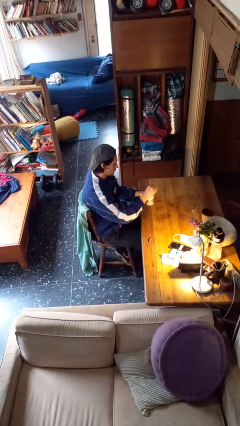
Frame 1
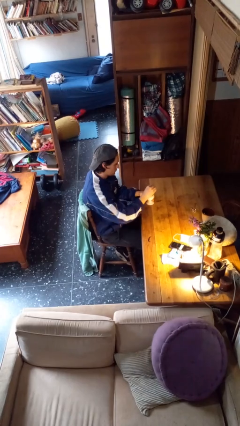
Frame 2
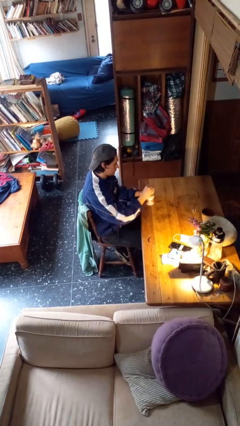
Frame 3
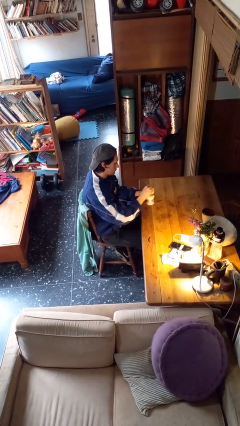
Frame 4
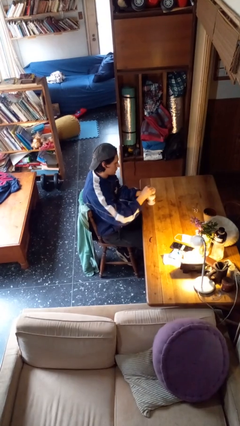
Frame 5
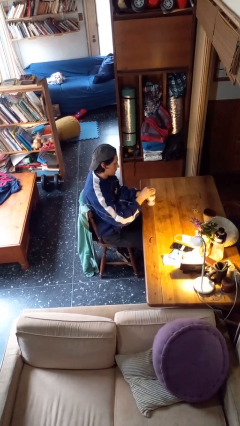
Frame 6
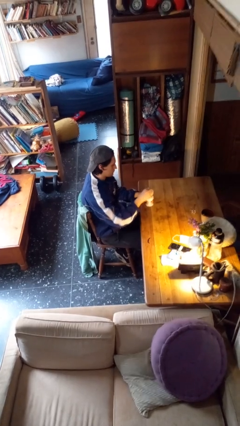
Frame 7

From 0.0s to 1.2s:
person stirs mug

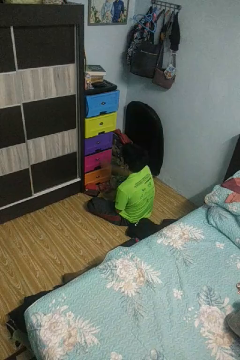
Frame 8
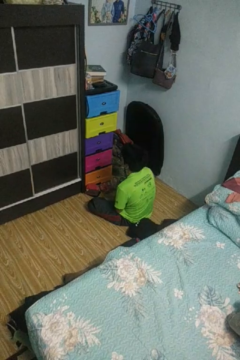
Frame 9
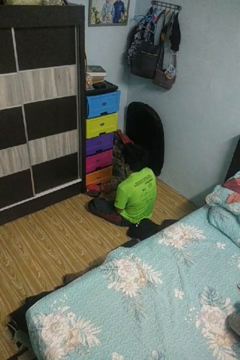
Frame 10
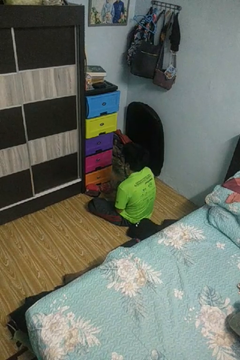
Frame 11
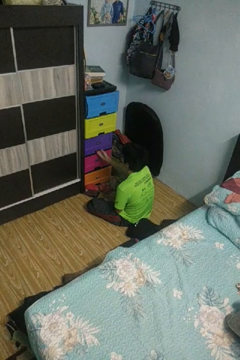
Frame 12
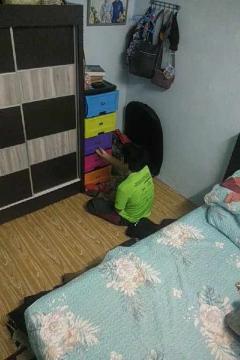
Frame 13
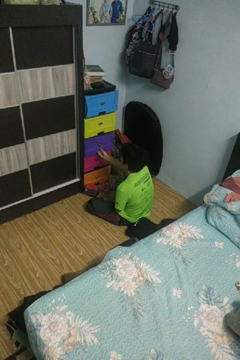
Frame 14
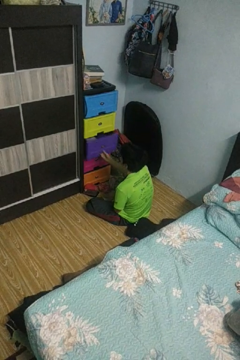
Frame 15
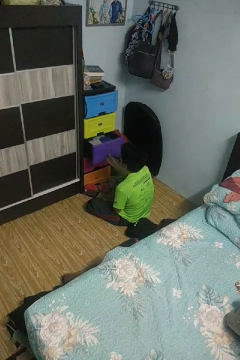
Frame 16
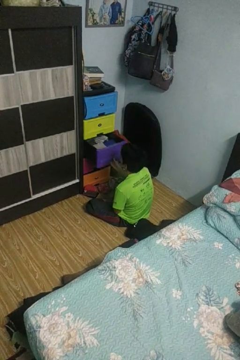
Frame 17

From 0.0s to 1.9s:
person opens dresser drawer

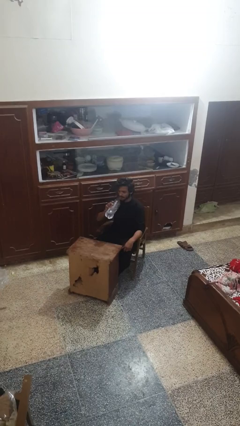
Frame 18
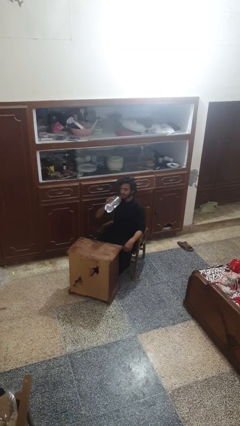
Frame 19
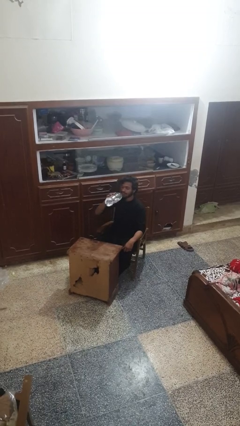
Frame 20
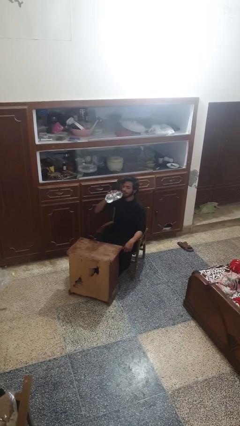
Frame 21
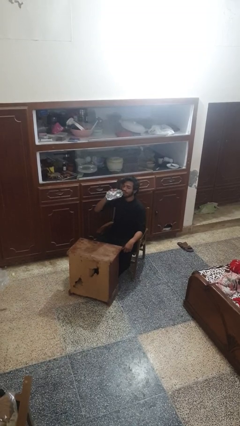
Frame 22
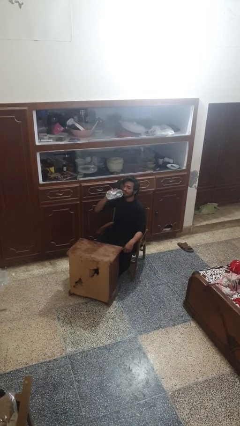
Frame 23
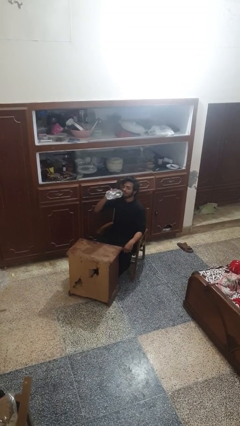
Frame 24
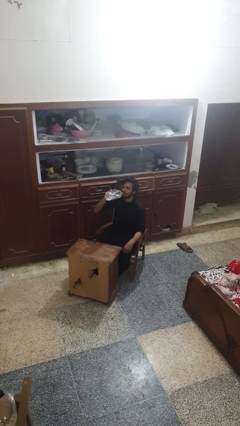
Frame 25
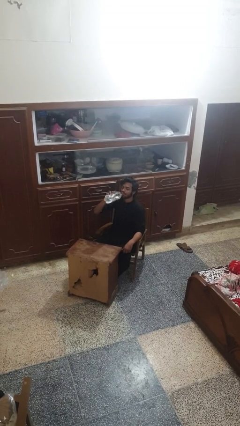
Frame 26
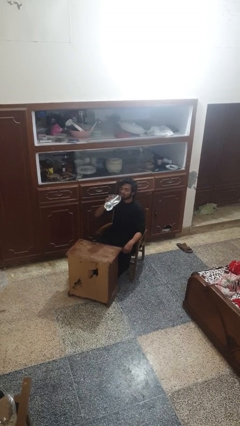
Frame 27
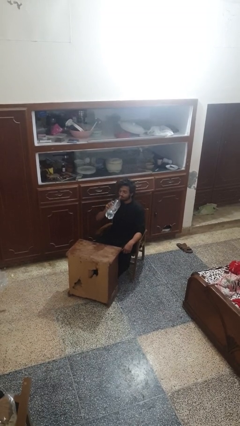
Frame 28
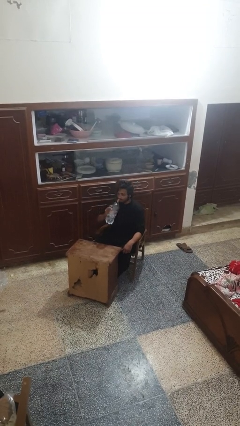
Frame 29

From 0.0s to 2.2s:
person drinks from bottle

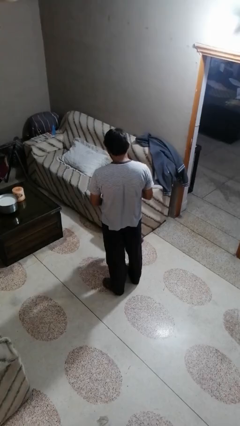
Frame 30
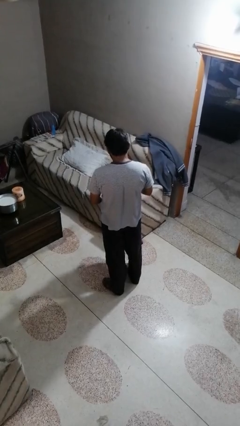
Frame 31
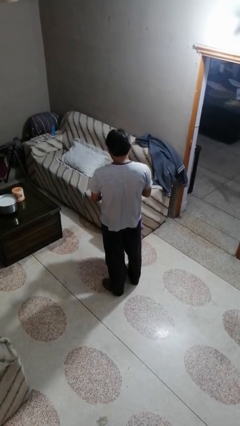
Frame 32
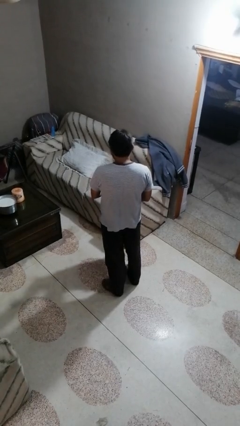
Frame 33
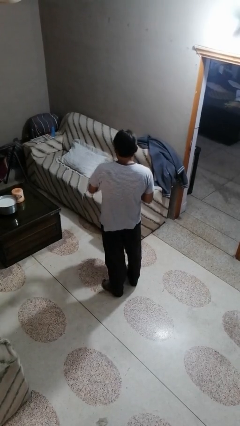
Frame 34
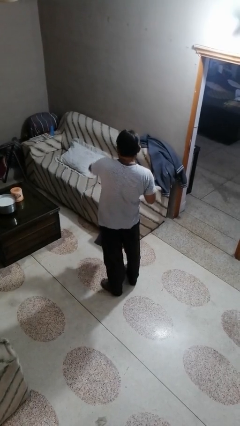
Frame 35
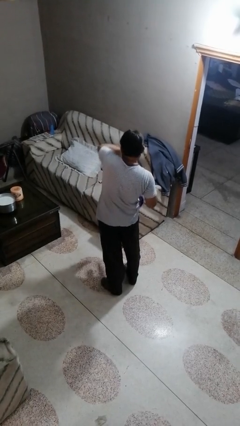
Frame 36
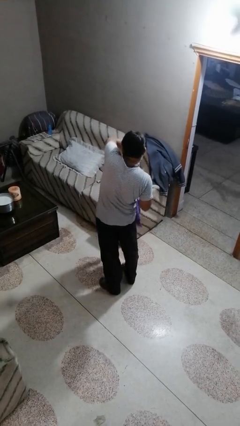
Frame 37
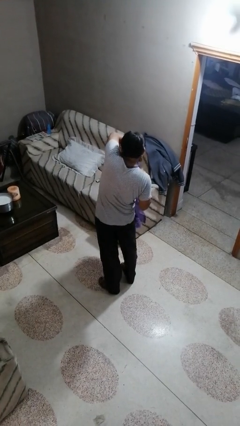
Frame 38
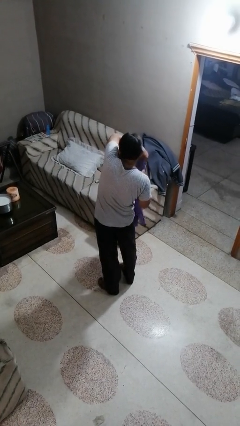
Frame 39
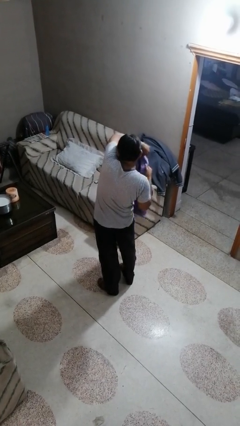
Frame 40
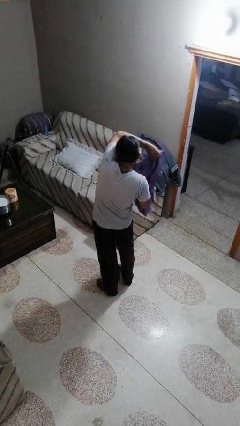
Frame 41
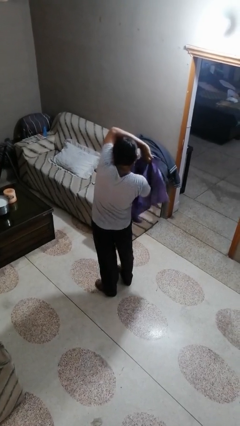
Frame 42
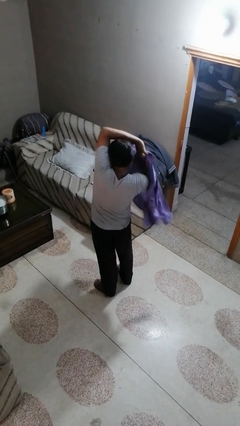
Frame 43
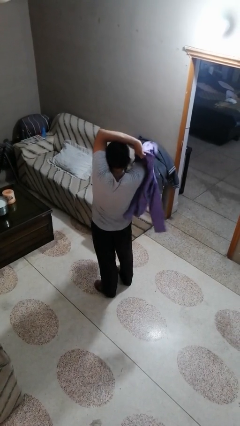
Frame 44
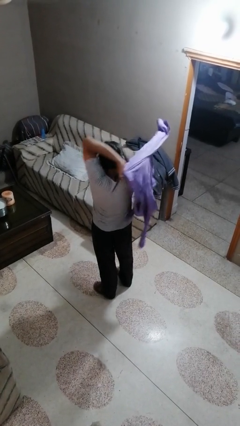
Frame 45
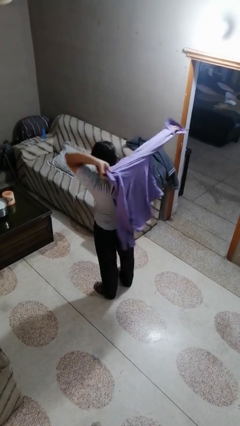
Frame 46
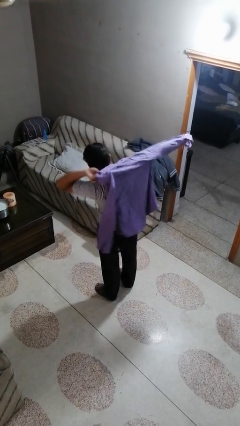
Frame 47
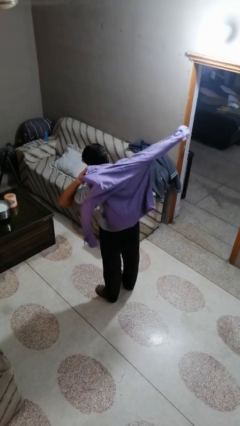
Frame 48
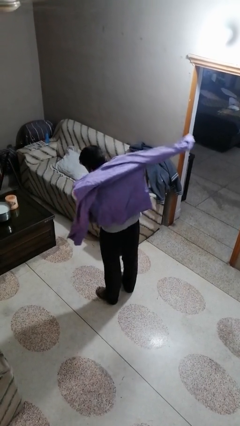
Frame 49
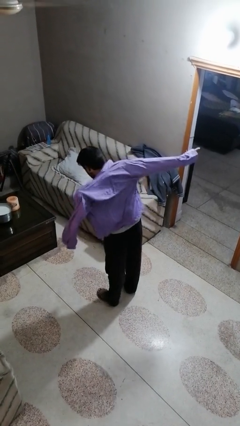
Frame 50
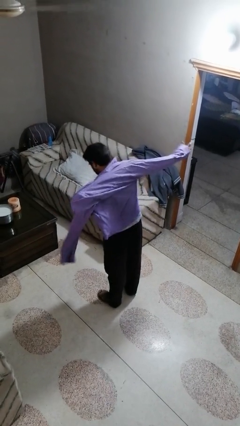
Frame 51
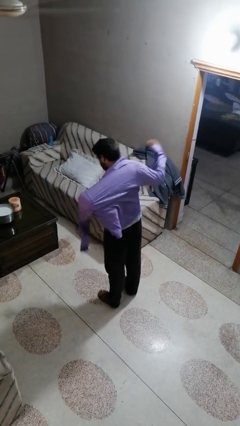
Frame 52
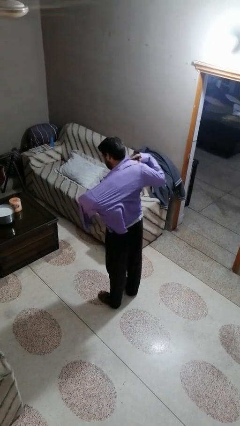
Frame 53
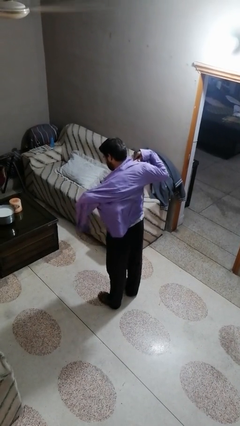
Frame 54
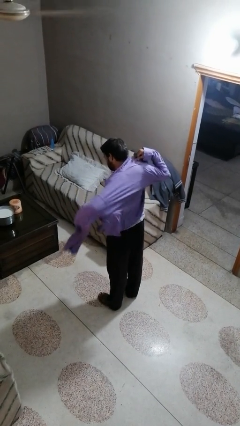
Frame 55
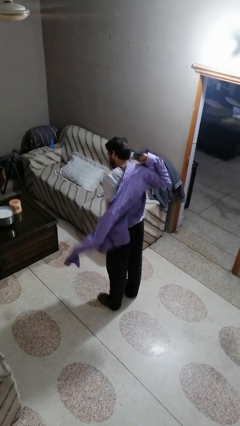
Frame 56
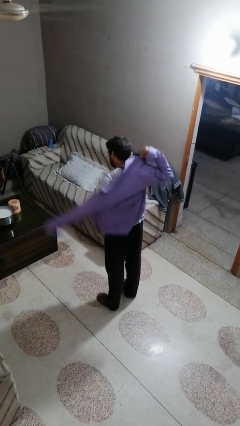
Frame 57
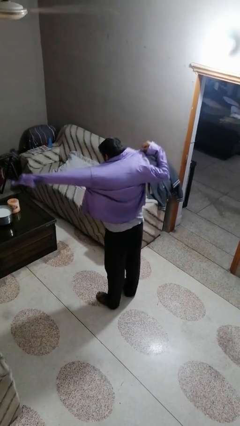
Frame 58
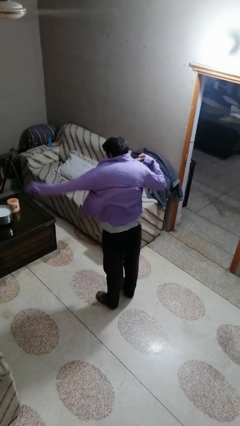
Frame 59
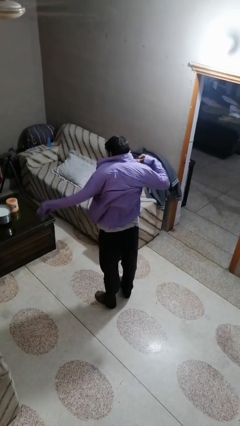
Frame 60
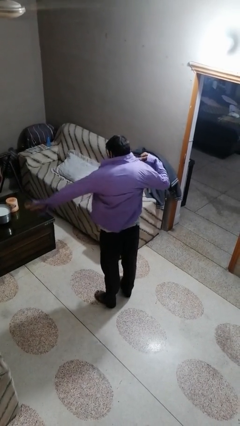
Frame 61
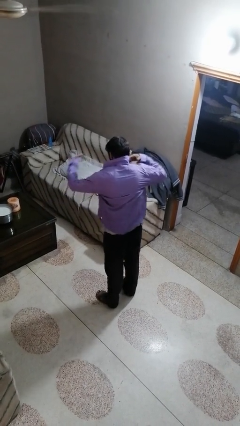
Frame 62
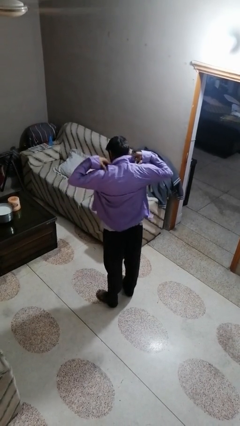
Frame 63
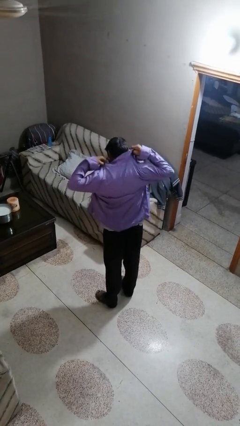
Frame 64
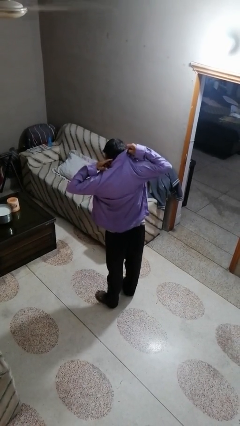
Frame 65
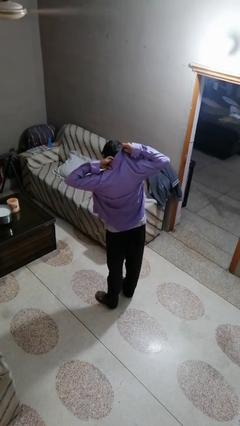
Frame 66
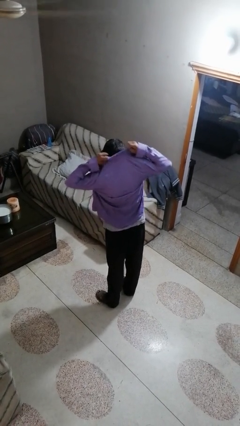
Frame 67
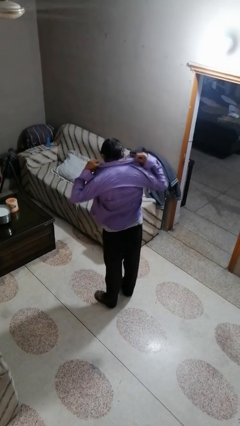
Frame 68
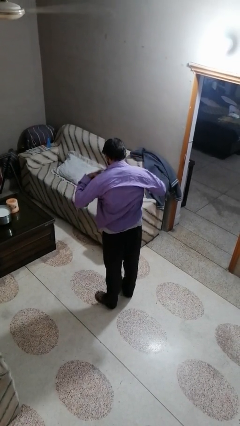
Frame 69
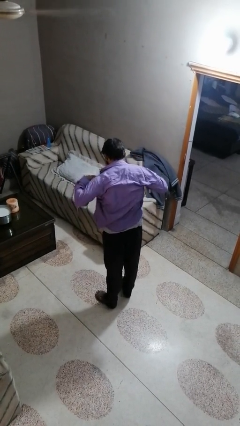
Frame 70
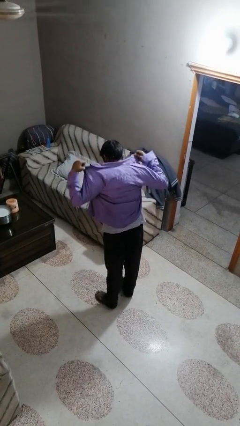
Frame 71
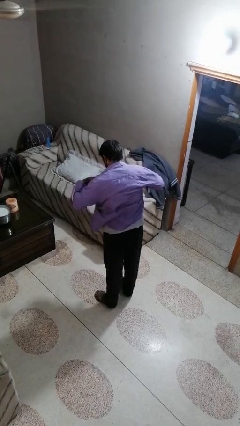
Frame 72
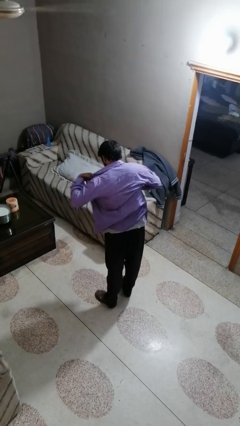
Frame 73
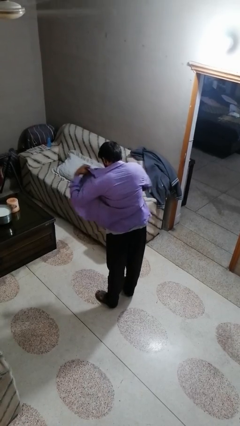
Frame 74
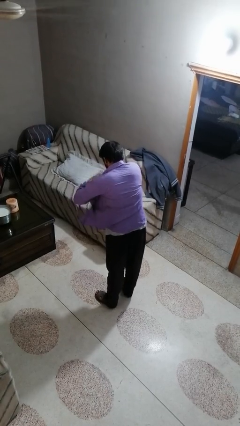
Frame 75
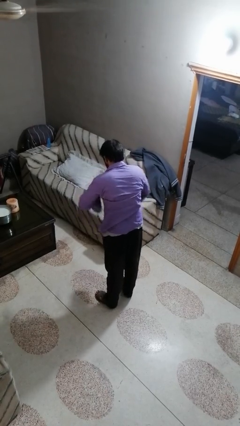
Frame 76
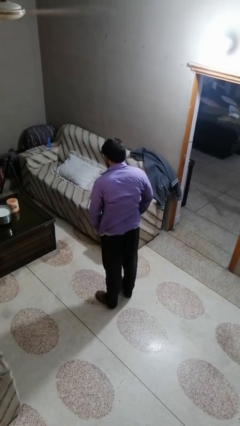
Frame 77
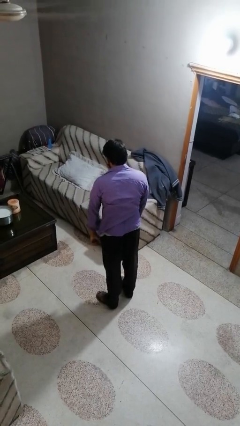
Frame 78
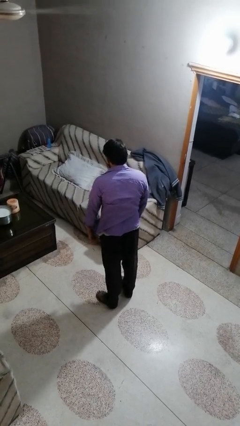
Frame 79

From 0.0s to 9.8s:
person puts on shirt

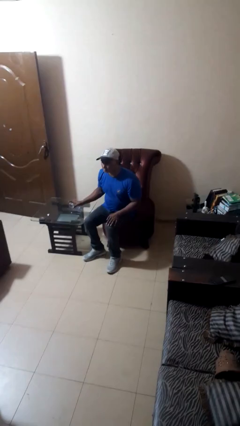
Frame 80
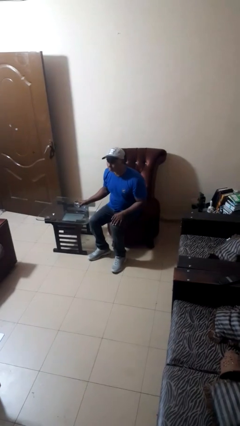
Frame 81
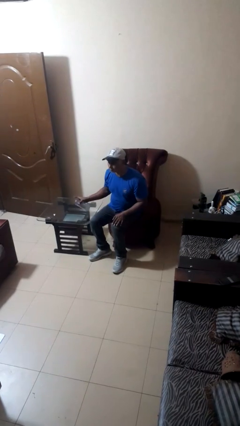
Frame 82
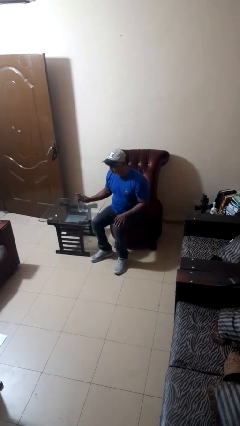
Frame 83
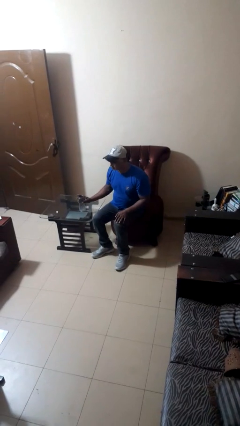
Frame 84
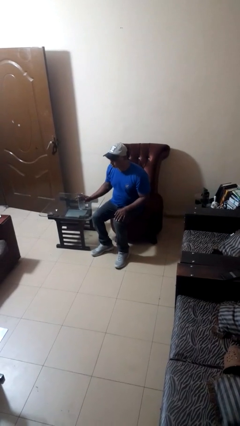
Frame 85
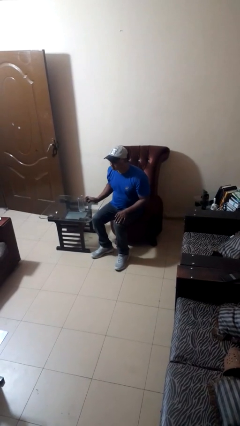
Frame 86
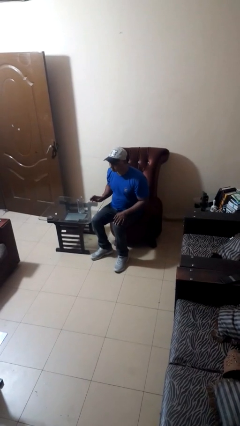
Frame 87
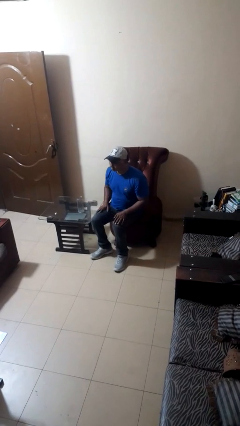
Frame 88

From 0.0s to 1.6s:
person sets upright glass

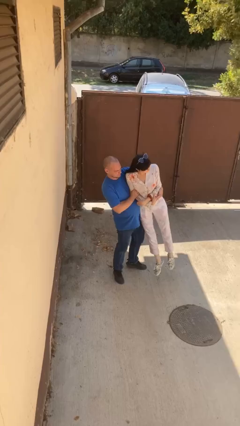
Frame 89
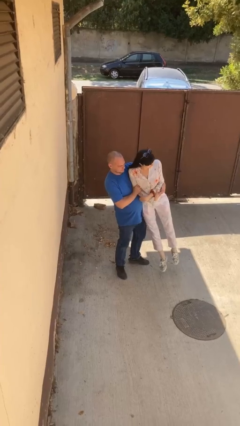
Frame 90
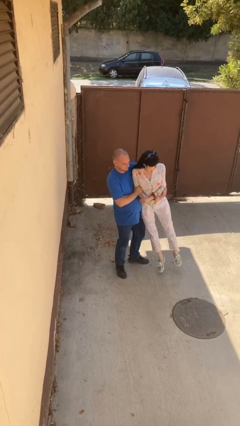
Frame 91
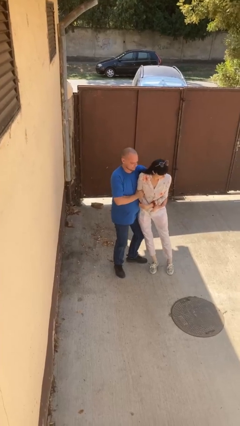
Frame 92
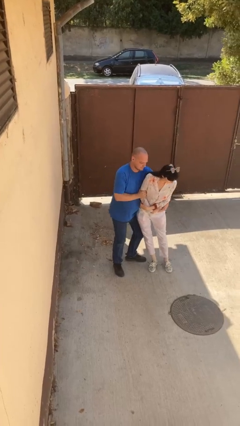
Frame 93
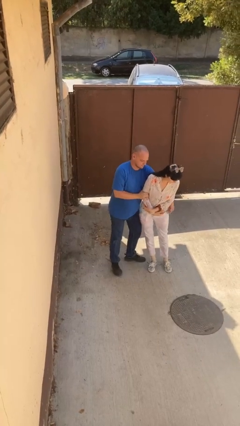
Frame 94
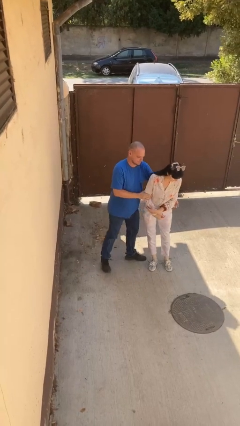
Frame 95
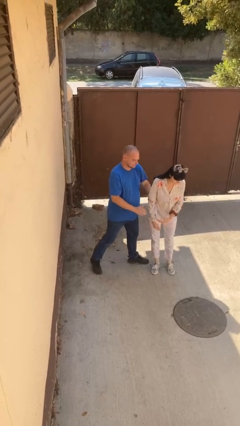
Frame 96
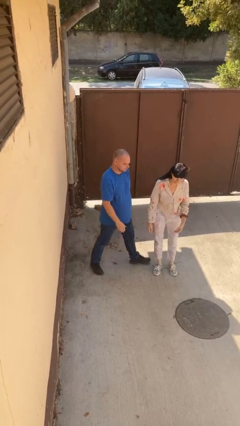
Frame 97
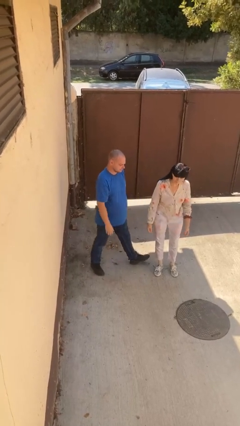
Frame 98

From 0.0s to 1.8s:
person puts down person
